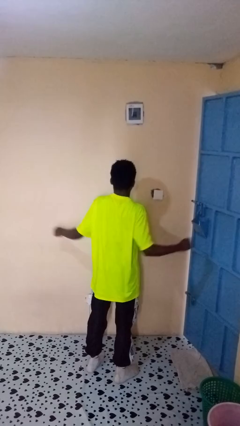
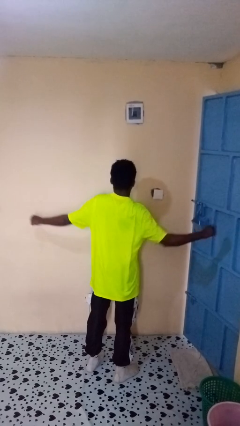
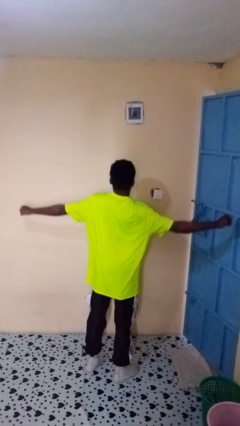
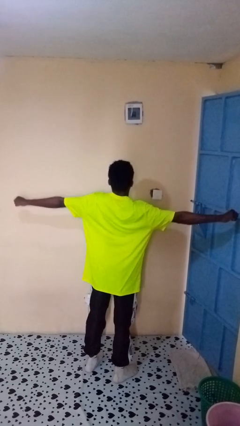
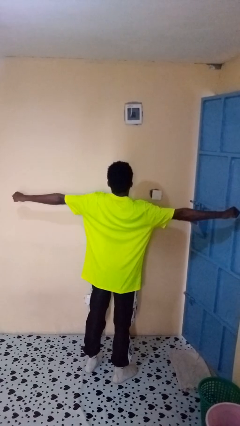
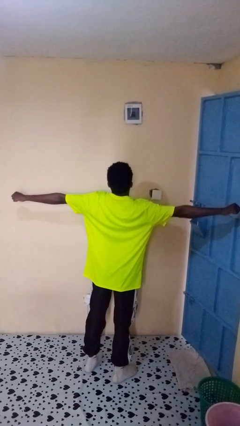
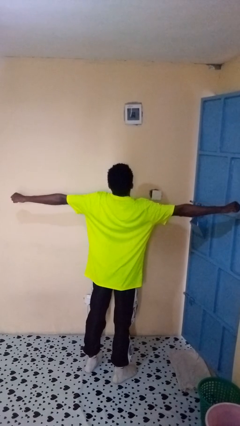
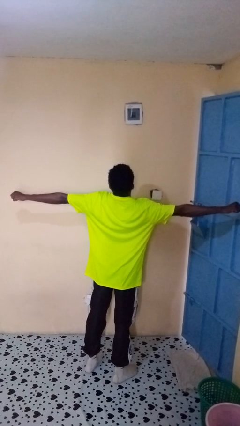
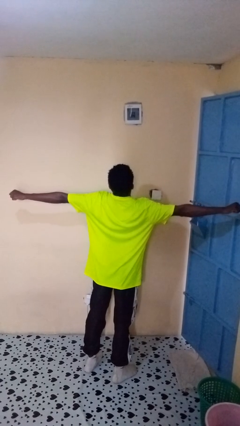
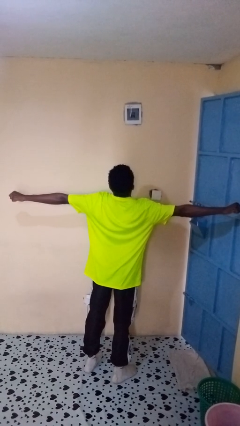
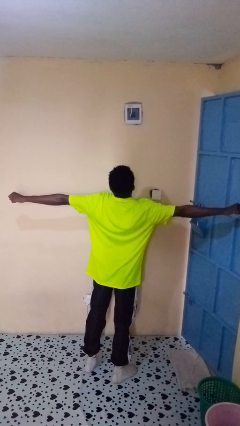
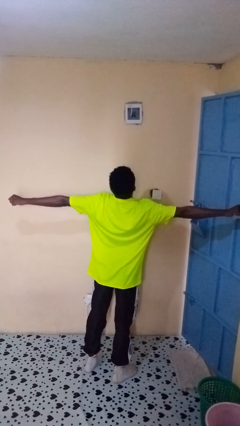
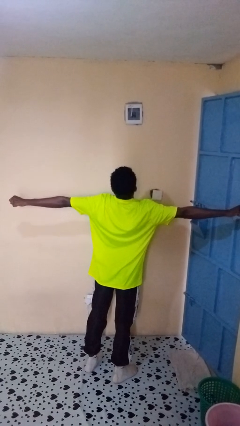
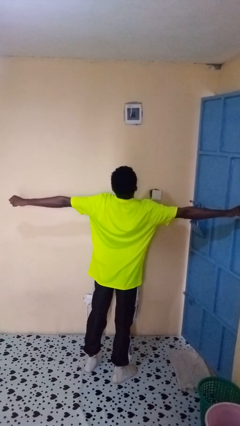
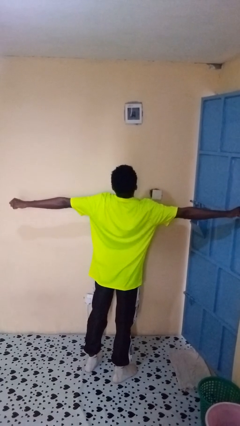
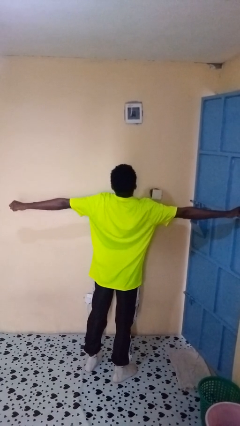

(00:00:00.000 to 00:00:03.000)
person stretches arms to side

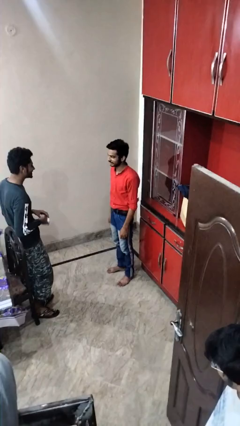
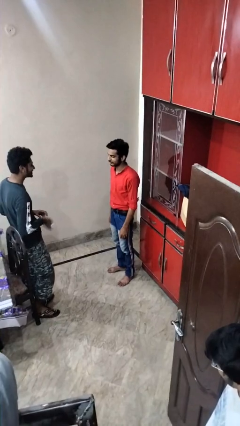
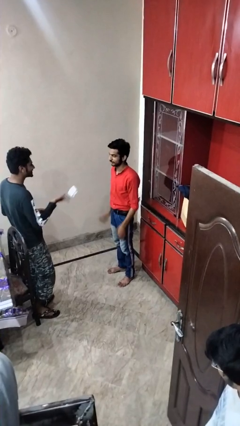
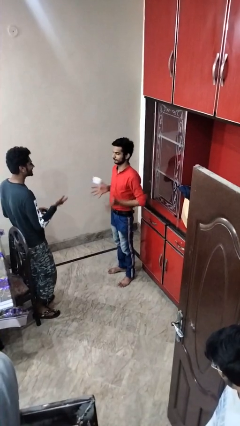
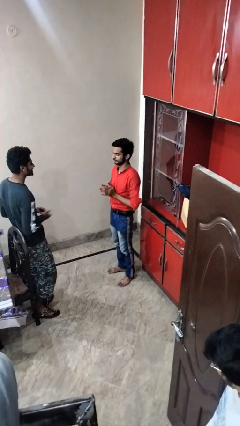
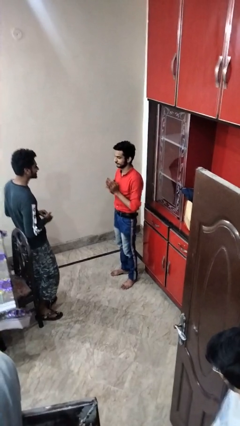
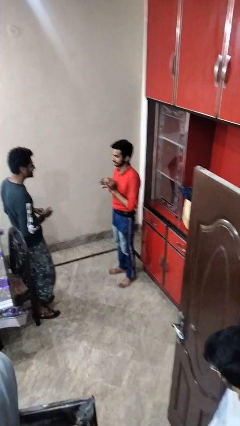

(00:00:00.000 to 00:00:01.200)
person catches object from person

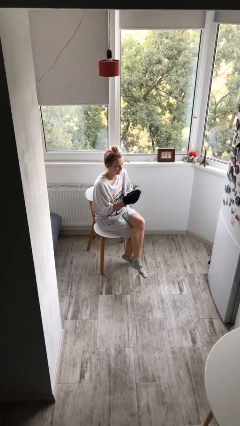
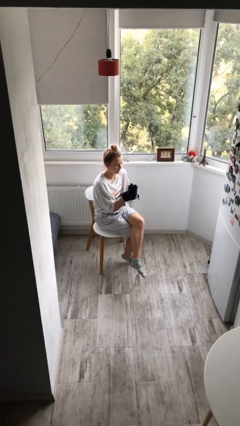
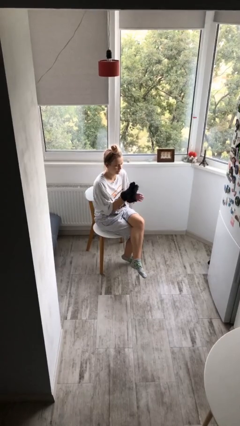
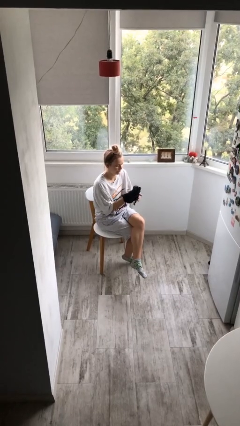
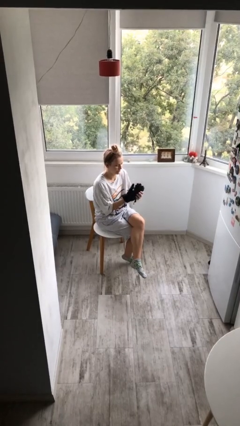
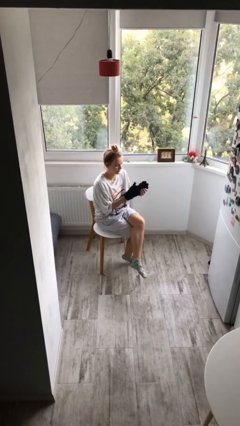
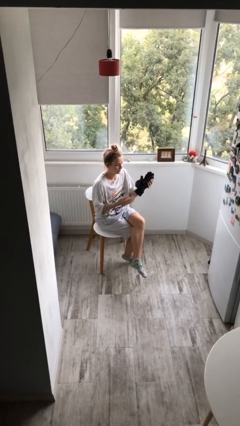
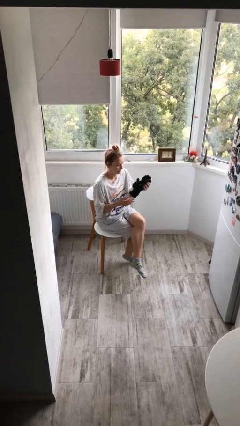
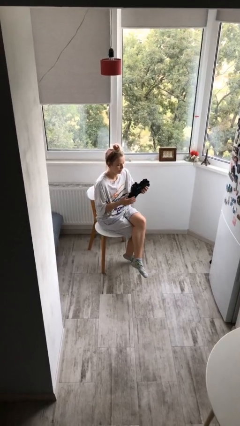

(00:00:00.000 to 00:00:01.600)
person takes off gloves

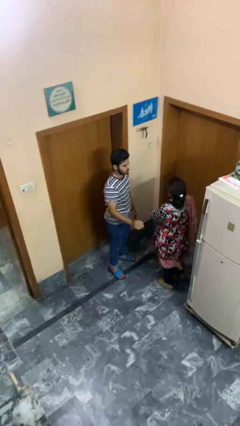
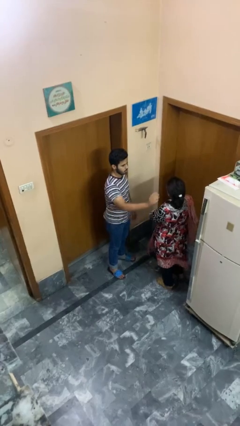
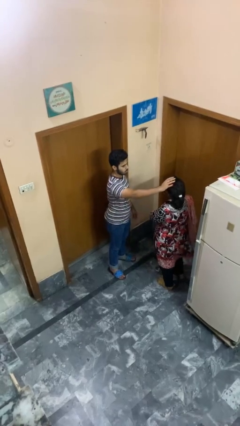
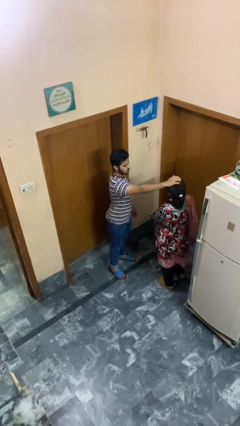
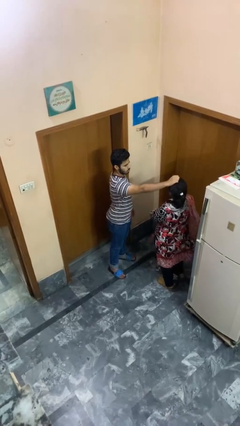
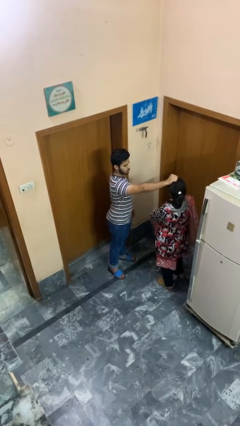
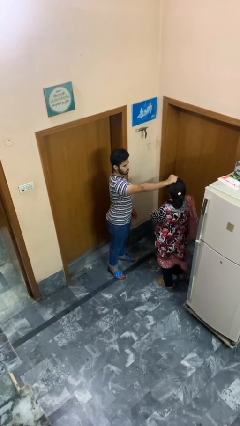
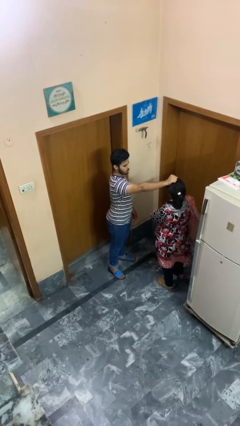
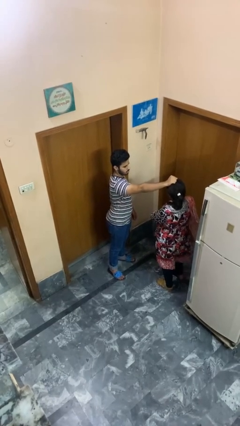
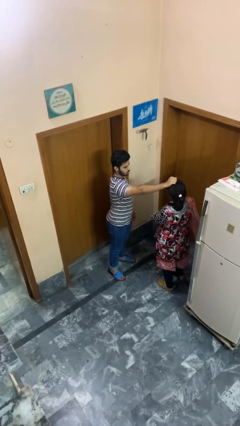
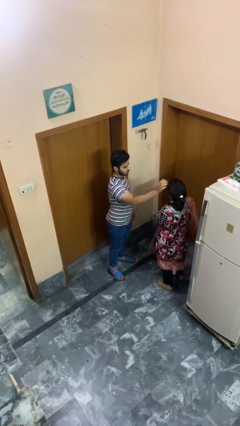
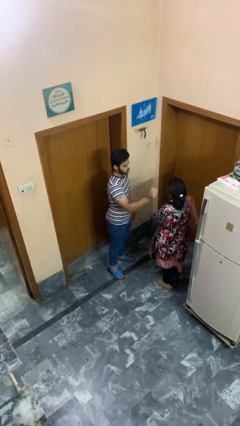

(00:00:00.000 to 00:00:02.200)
person grabs person by hair

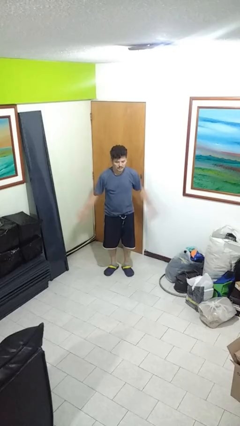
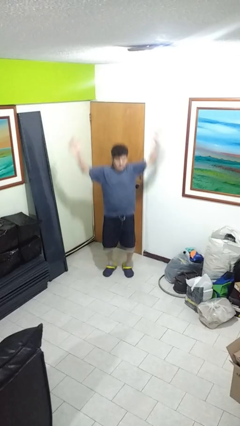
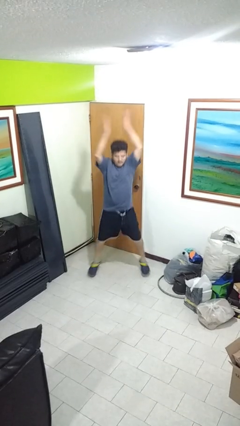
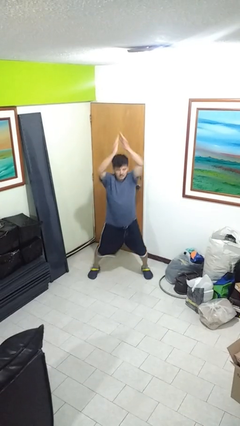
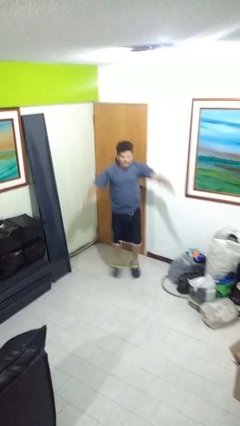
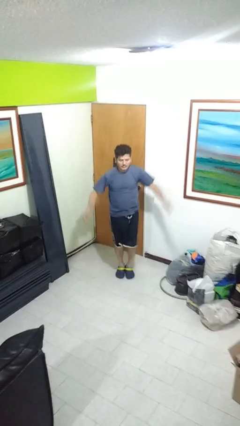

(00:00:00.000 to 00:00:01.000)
person exercises with jumping jacks

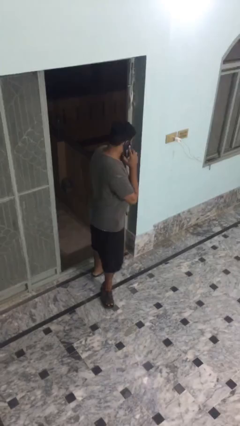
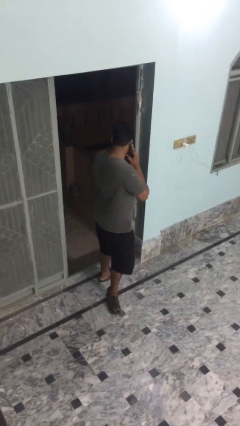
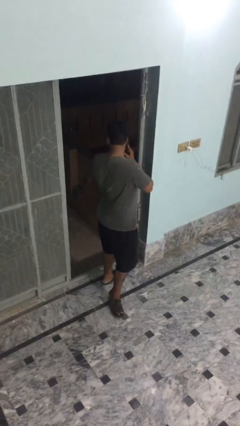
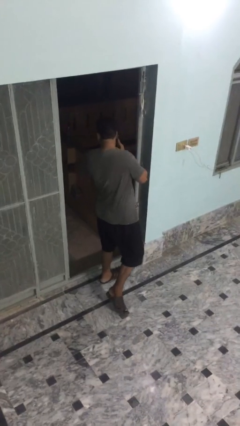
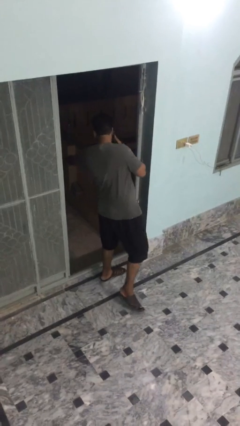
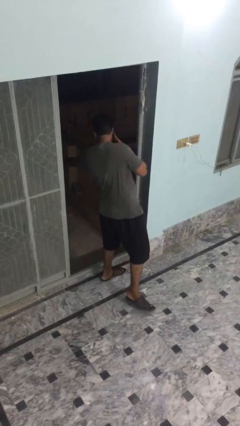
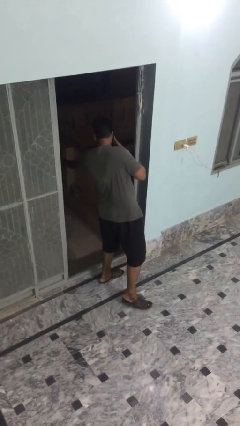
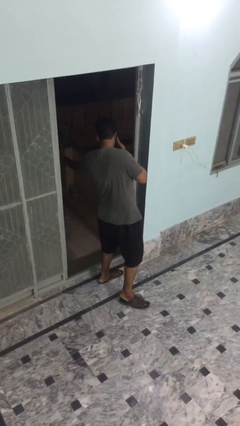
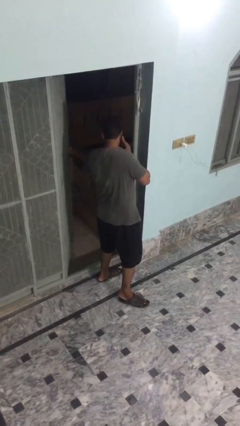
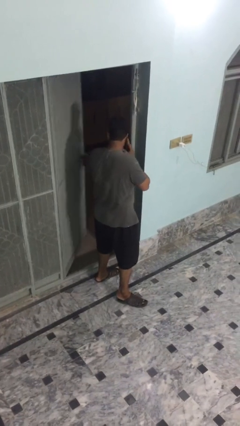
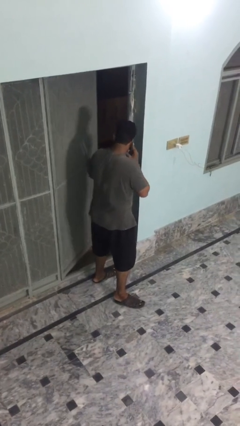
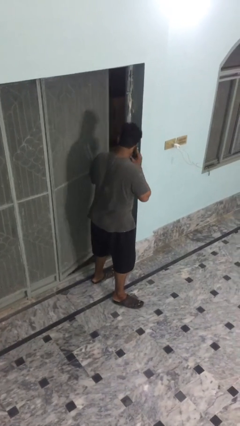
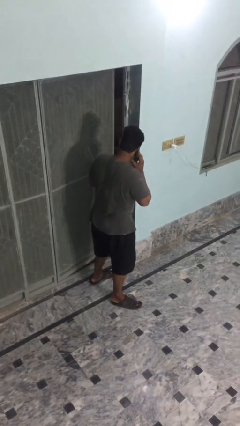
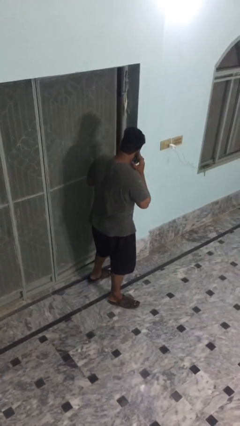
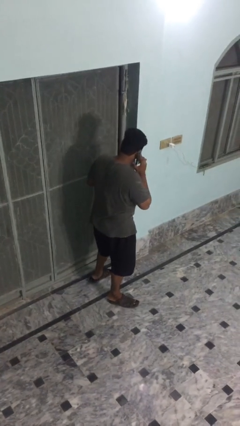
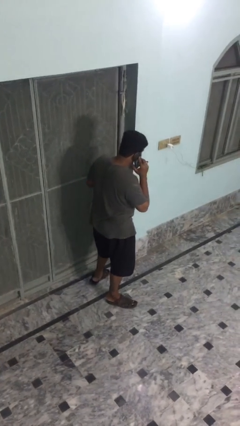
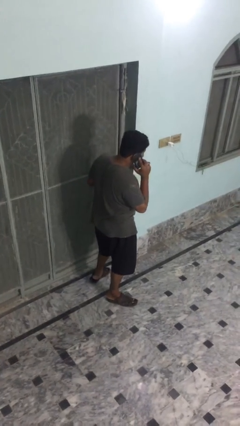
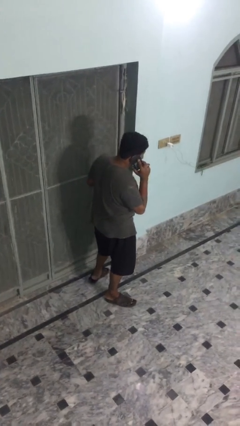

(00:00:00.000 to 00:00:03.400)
person closes facility door

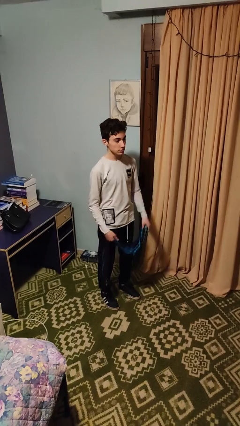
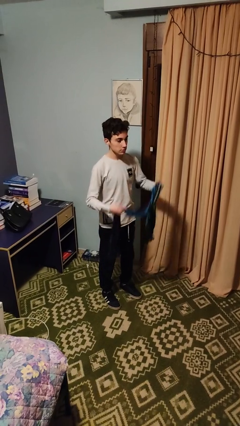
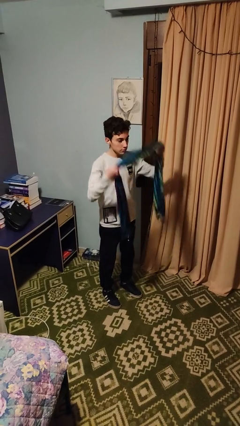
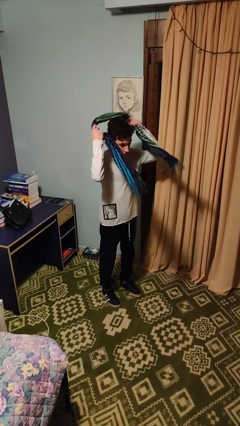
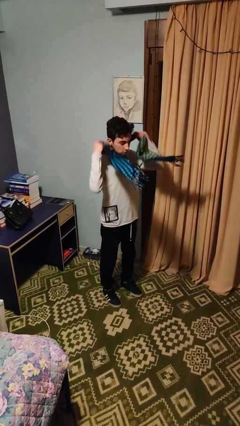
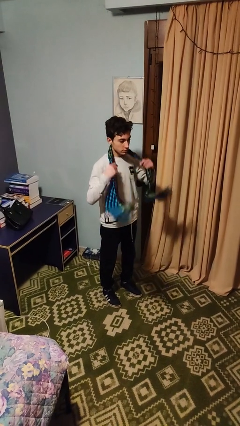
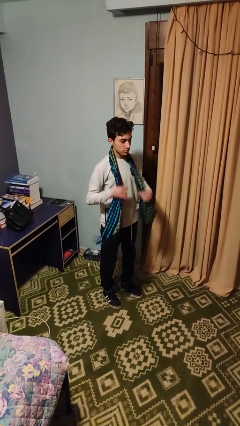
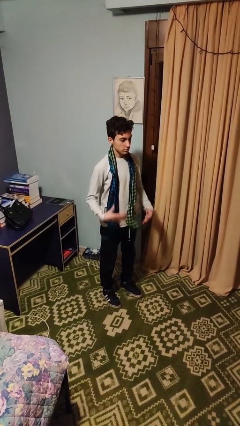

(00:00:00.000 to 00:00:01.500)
person puts on scarf

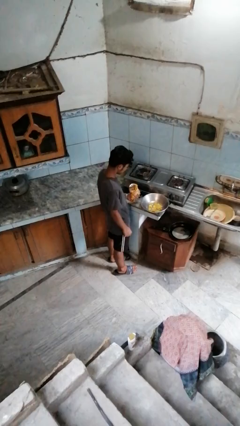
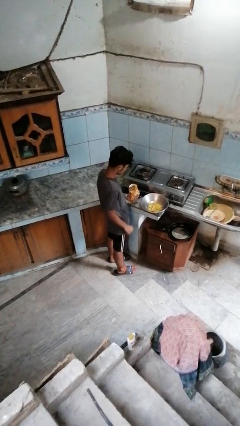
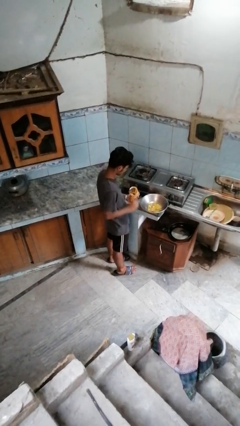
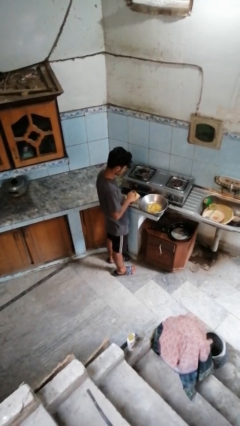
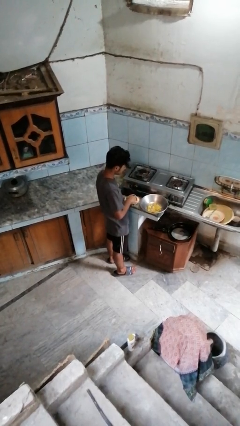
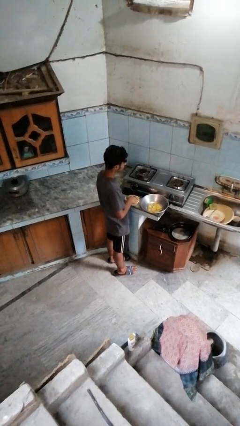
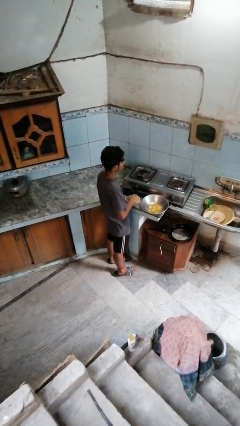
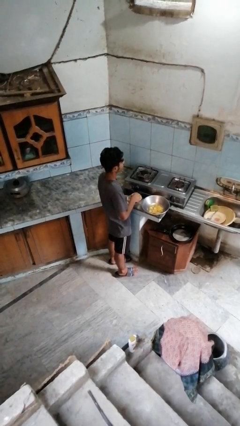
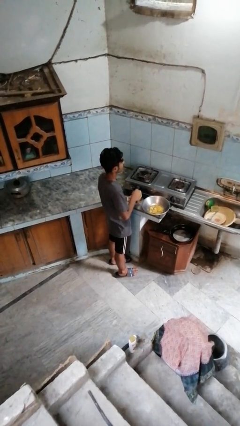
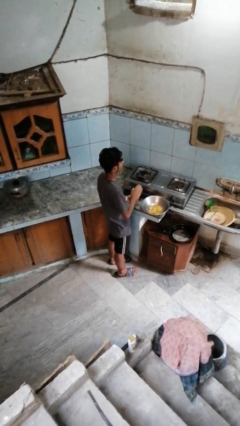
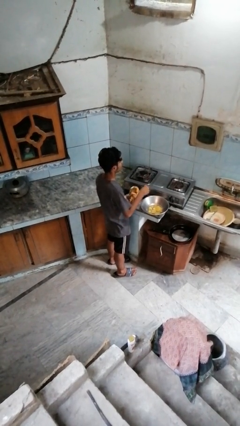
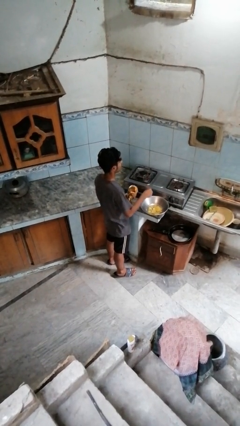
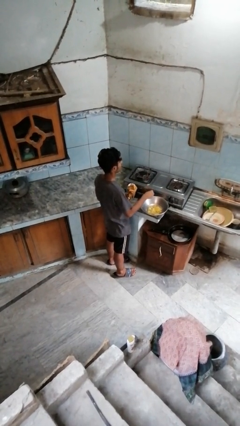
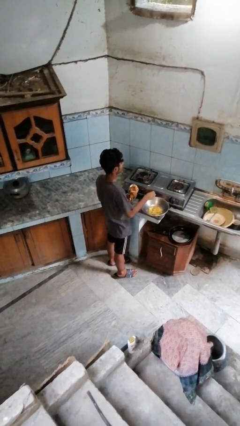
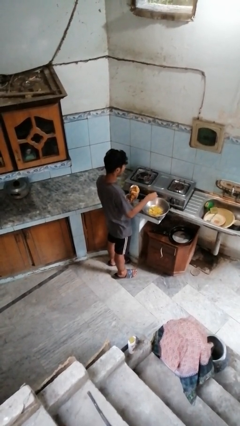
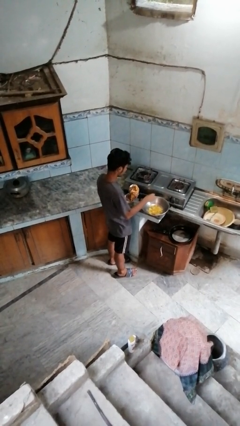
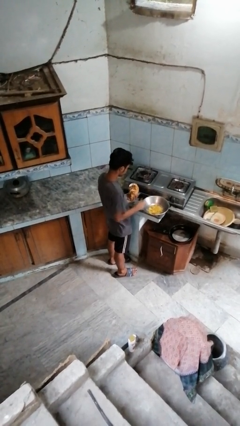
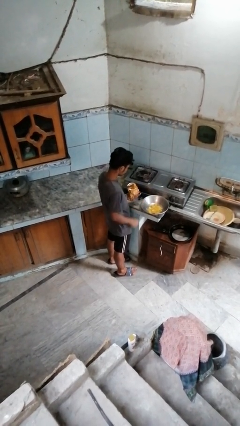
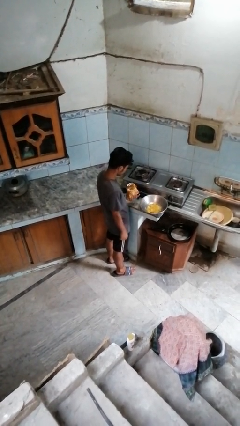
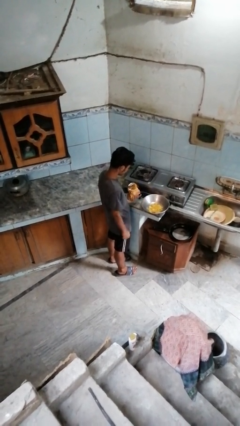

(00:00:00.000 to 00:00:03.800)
person pours into bowl
